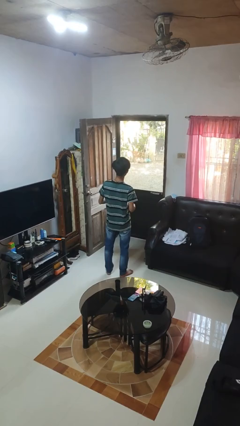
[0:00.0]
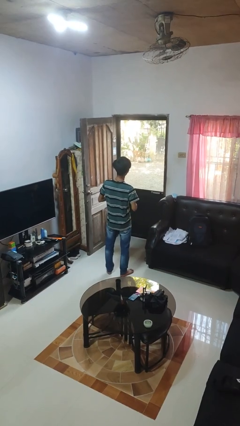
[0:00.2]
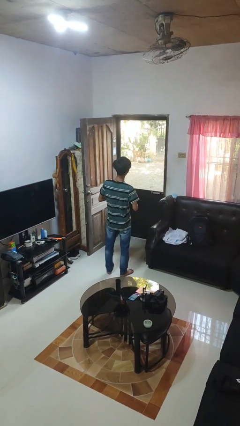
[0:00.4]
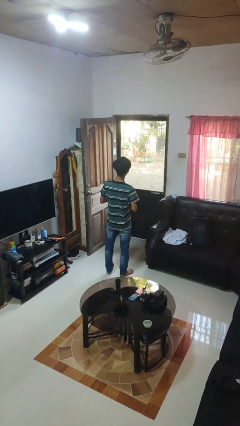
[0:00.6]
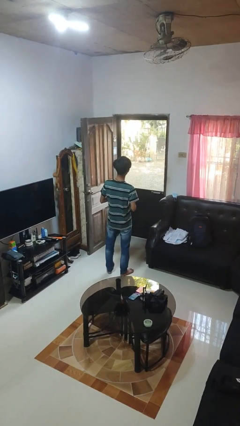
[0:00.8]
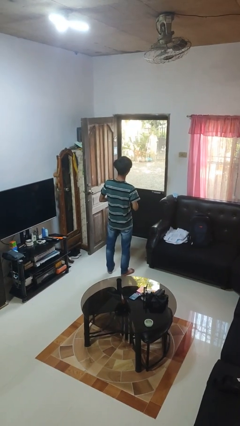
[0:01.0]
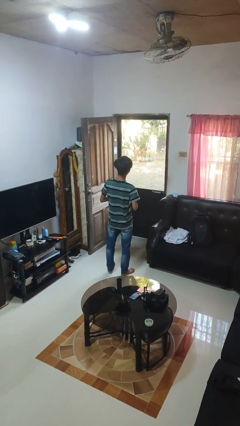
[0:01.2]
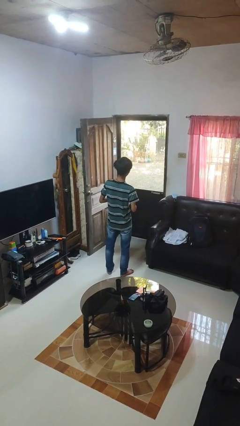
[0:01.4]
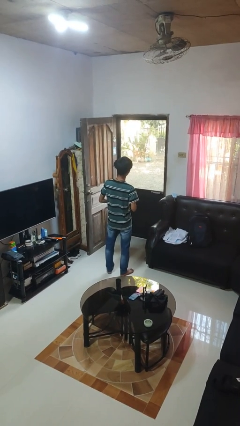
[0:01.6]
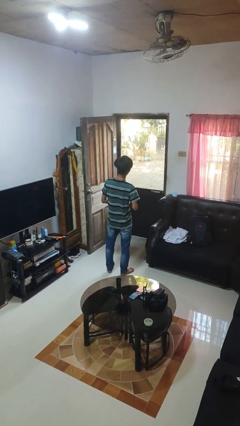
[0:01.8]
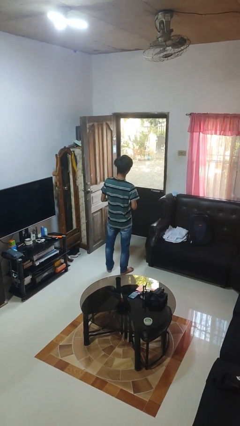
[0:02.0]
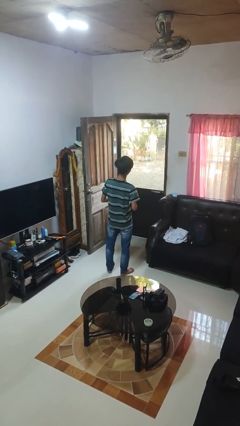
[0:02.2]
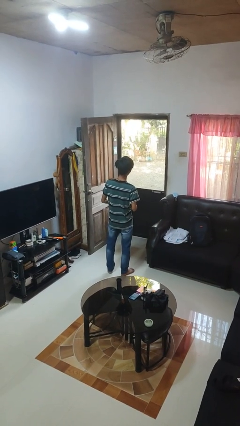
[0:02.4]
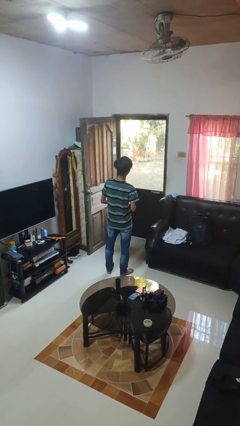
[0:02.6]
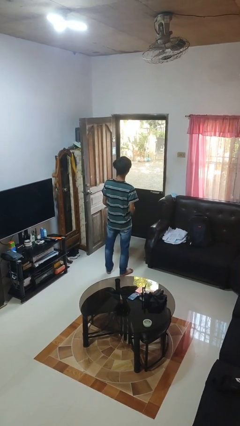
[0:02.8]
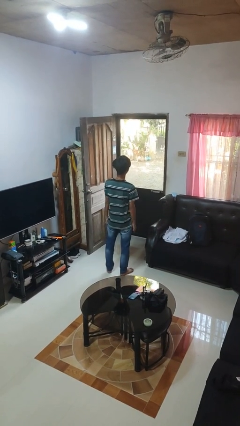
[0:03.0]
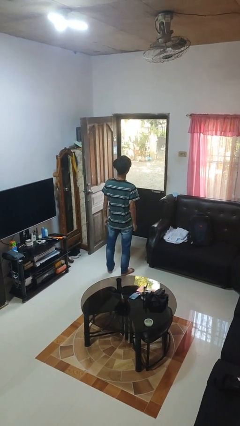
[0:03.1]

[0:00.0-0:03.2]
person buttons shirt

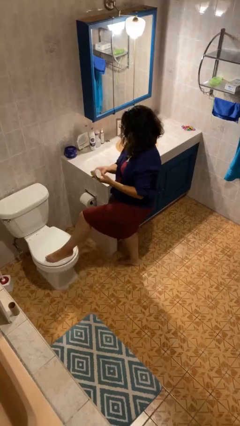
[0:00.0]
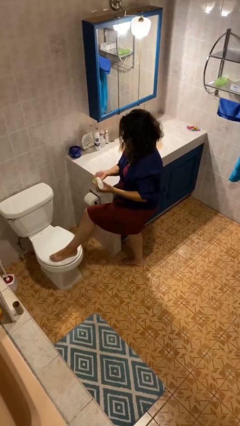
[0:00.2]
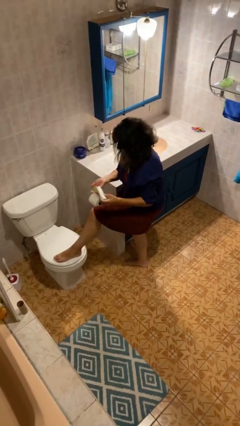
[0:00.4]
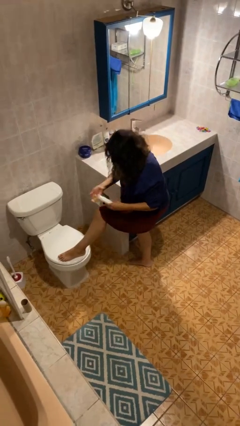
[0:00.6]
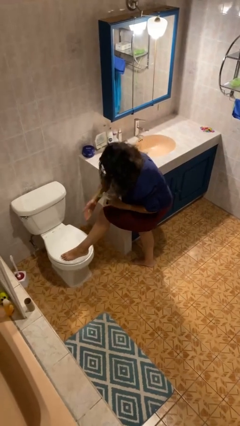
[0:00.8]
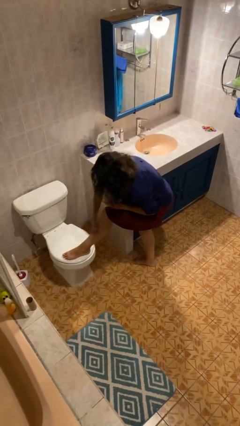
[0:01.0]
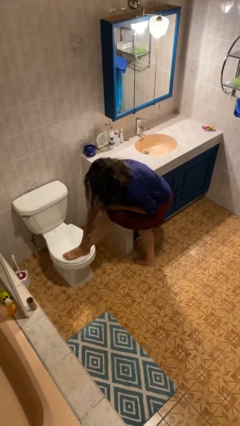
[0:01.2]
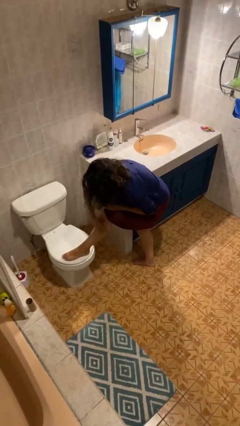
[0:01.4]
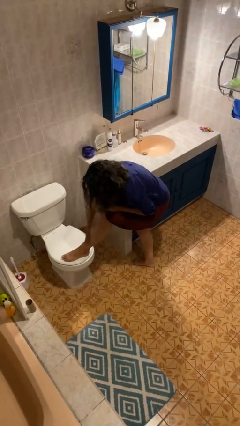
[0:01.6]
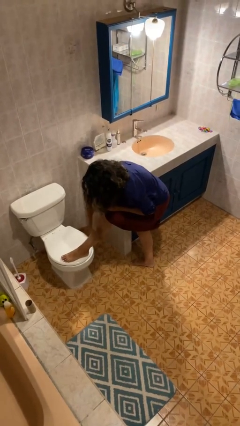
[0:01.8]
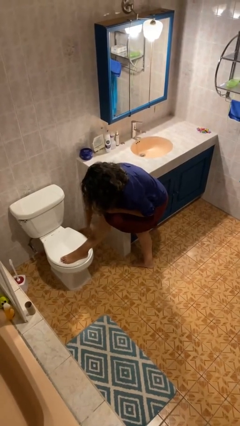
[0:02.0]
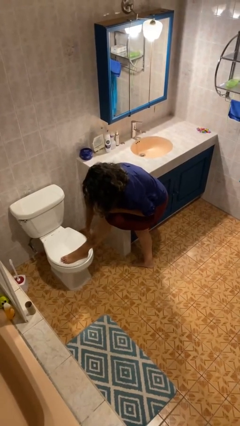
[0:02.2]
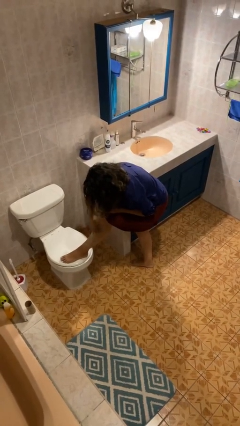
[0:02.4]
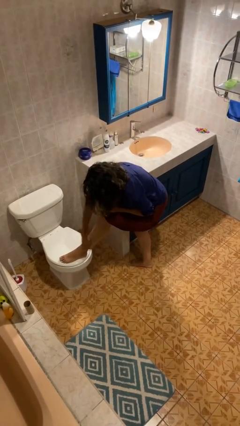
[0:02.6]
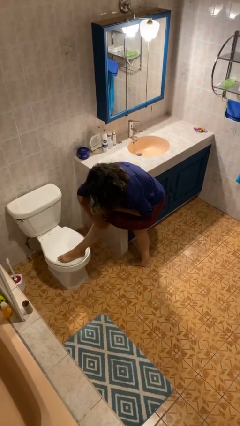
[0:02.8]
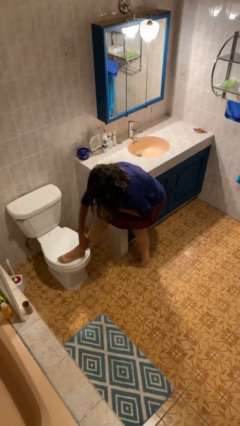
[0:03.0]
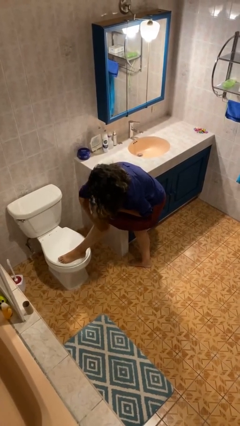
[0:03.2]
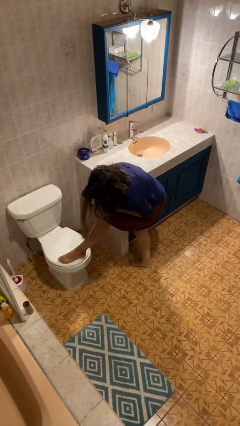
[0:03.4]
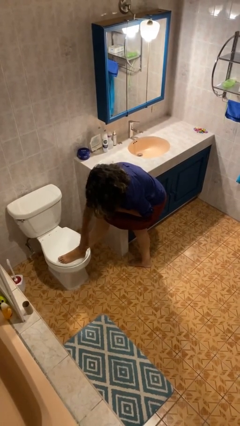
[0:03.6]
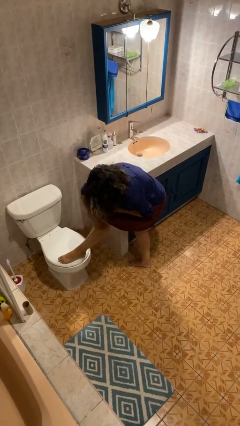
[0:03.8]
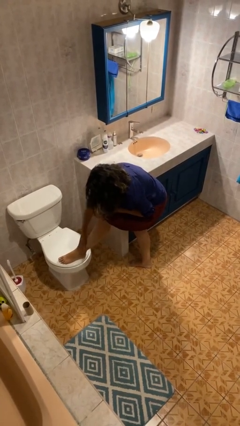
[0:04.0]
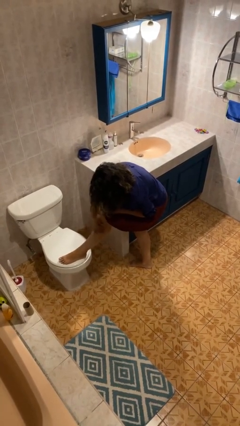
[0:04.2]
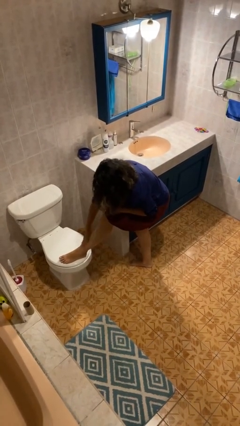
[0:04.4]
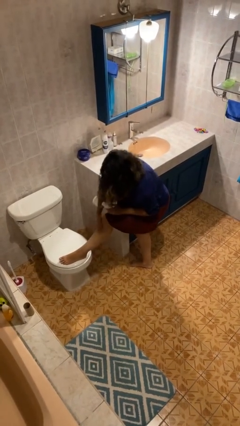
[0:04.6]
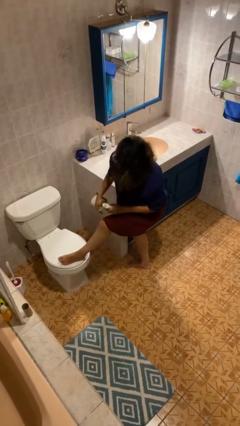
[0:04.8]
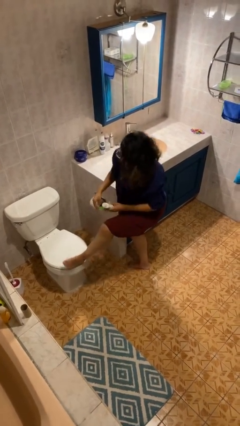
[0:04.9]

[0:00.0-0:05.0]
person applies sunscreen

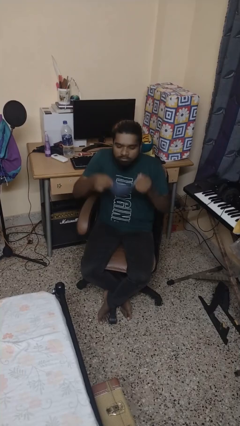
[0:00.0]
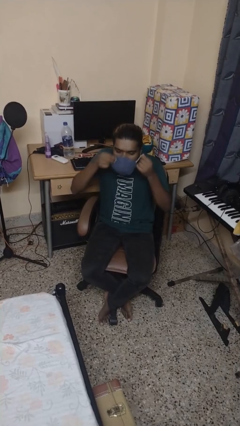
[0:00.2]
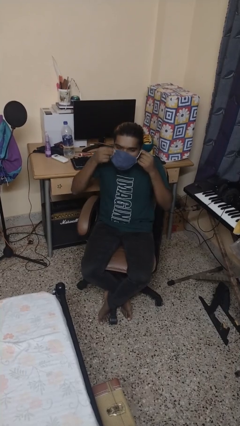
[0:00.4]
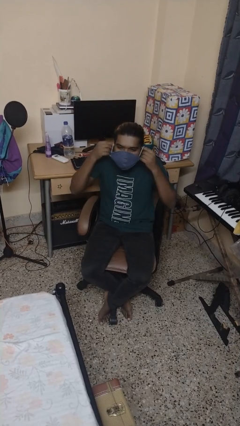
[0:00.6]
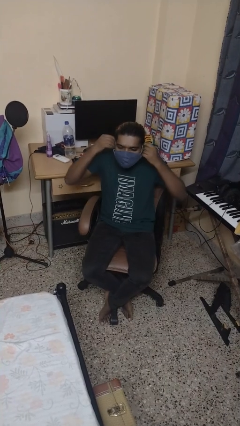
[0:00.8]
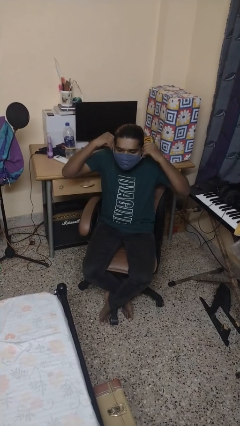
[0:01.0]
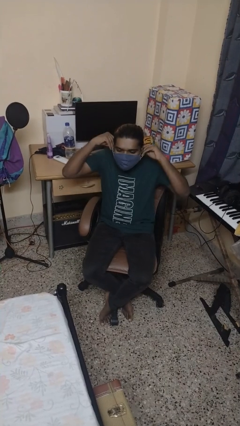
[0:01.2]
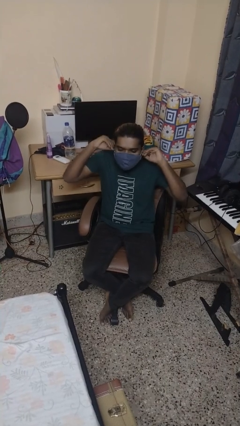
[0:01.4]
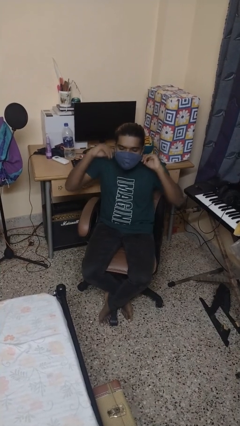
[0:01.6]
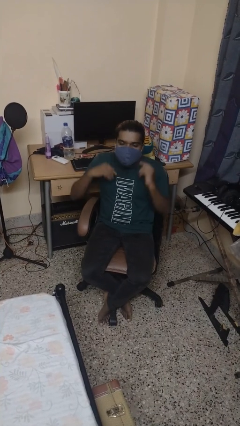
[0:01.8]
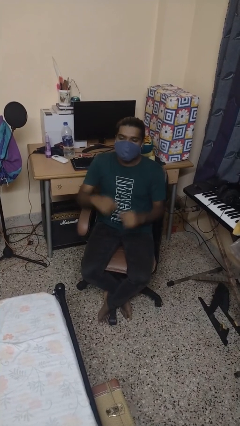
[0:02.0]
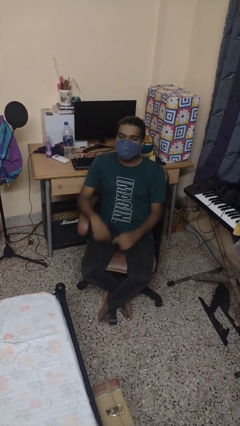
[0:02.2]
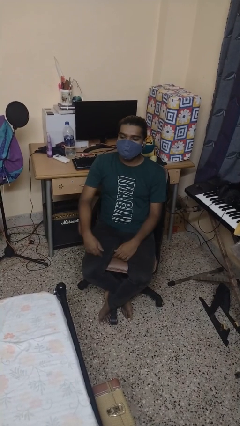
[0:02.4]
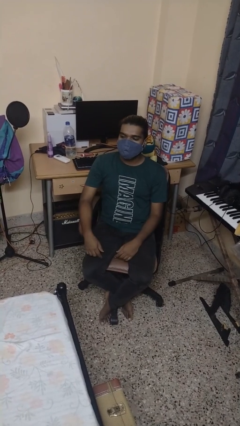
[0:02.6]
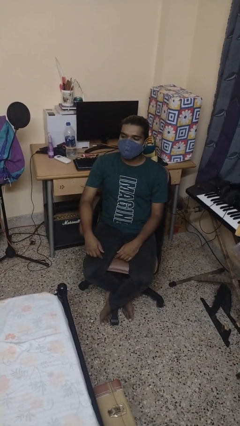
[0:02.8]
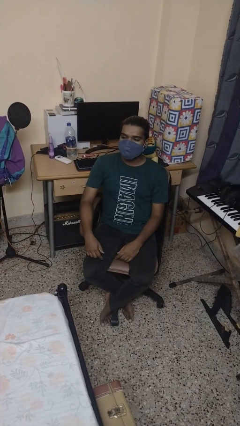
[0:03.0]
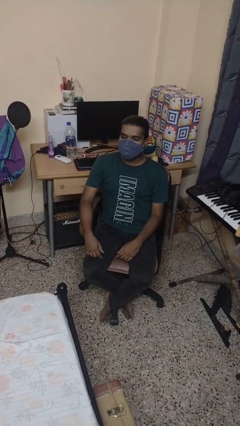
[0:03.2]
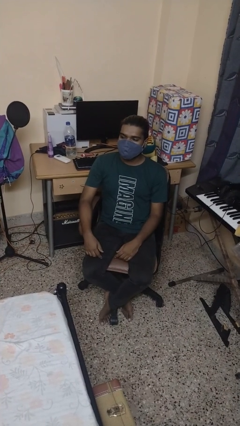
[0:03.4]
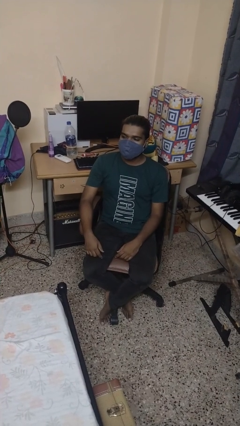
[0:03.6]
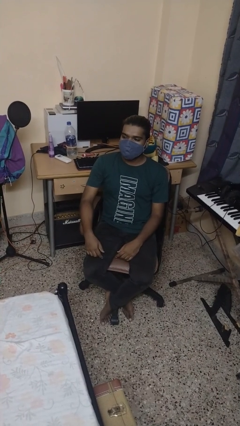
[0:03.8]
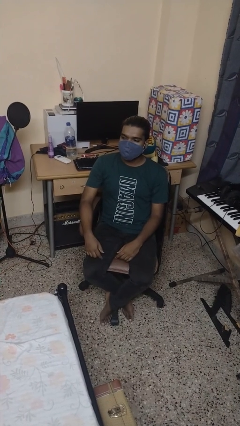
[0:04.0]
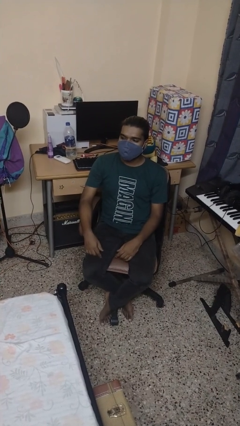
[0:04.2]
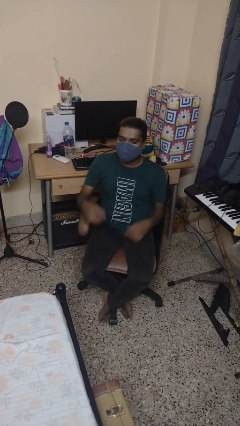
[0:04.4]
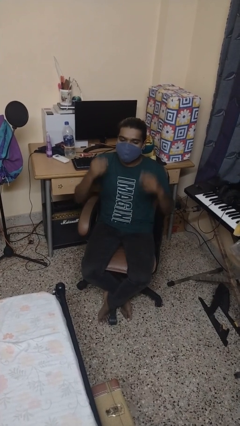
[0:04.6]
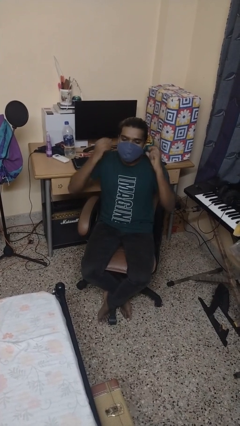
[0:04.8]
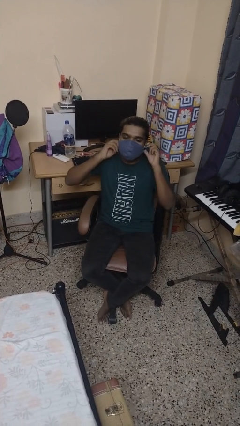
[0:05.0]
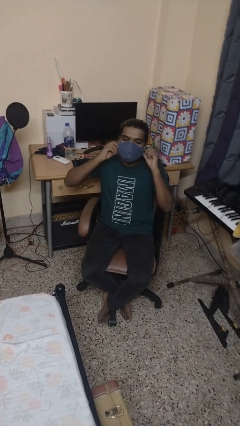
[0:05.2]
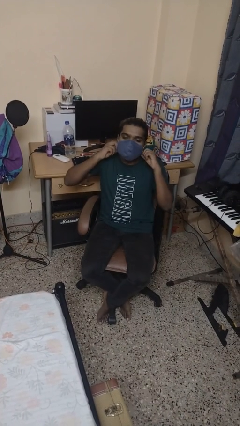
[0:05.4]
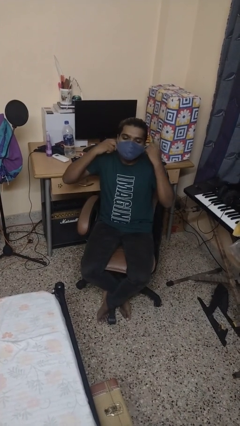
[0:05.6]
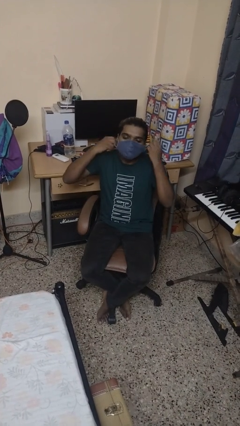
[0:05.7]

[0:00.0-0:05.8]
person puts on facemask

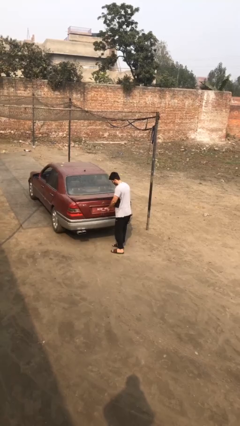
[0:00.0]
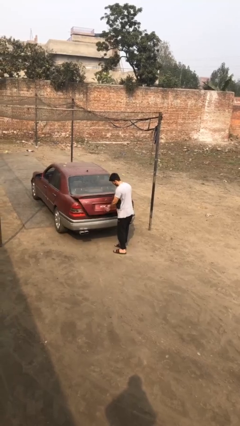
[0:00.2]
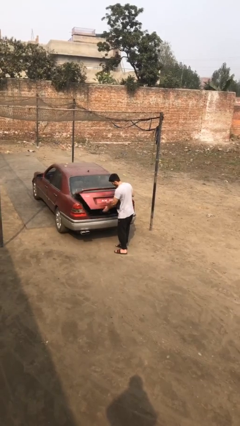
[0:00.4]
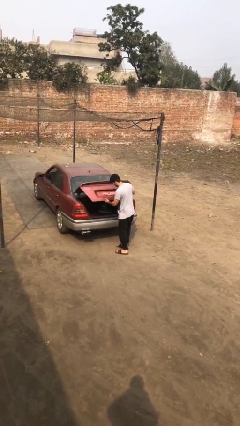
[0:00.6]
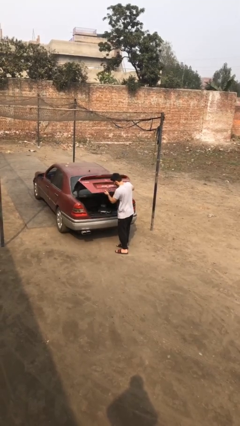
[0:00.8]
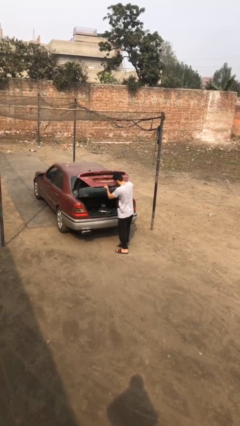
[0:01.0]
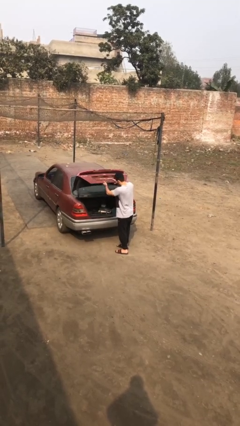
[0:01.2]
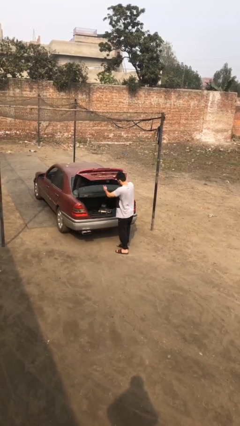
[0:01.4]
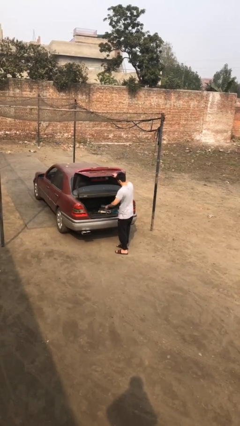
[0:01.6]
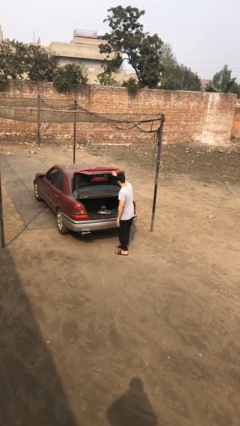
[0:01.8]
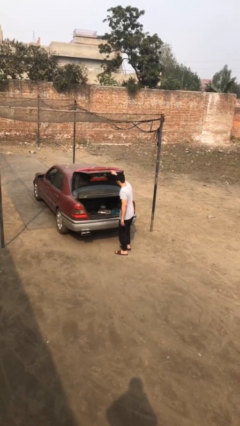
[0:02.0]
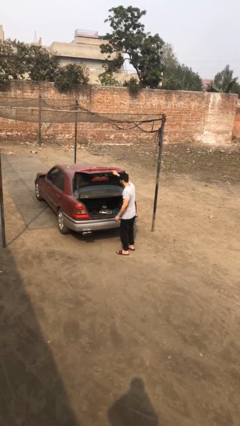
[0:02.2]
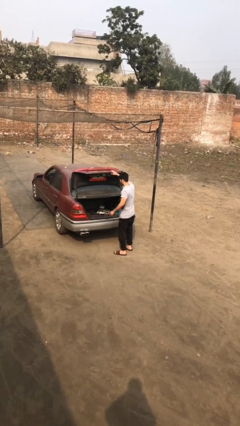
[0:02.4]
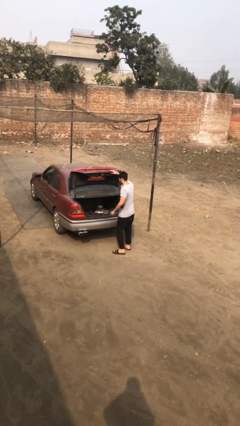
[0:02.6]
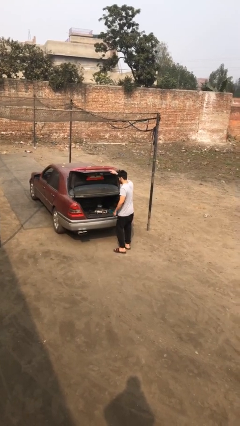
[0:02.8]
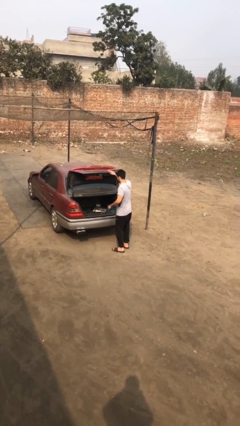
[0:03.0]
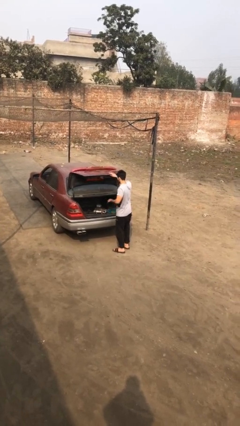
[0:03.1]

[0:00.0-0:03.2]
person opens car trunk

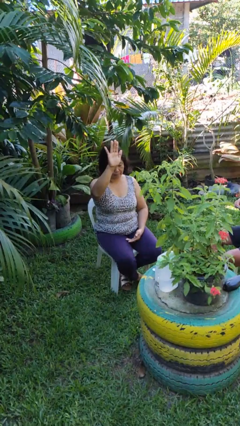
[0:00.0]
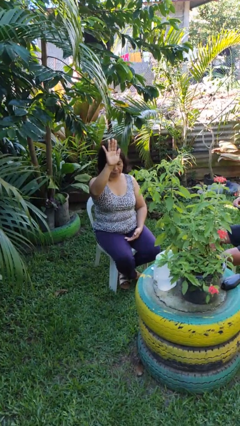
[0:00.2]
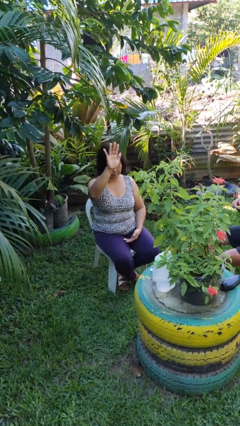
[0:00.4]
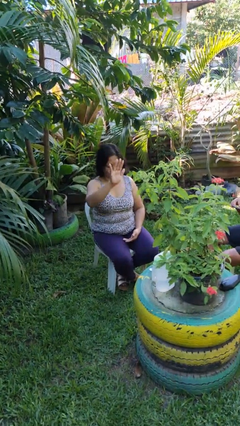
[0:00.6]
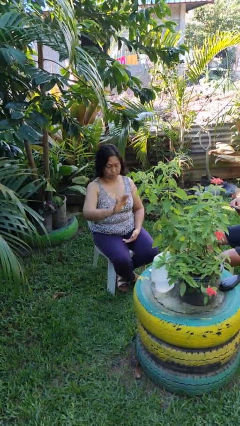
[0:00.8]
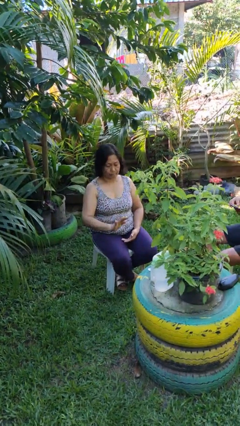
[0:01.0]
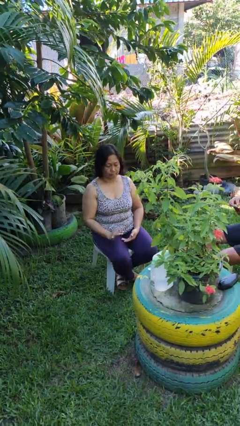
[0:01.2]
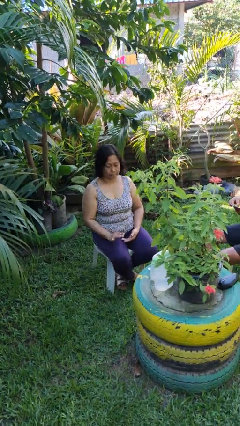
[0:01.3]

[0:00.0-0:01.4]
person gestures swipe down
